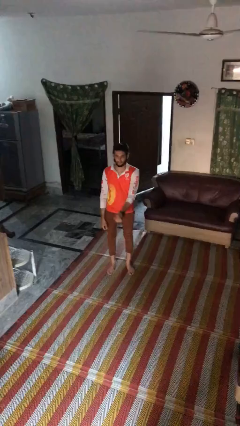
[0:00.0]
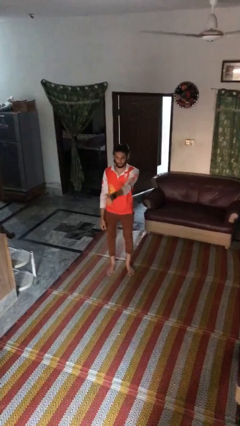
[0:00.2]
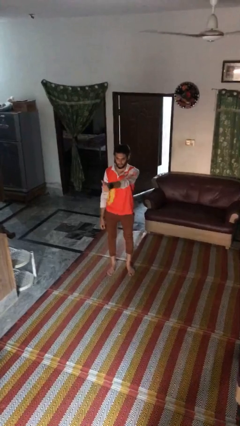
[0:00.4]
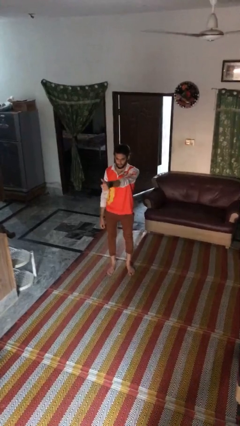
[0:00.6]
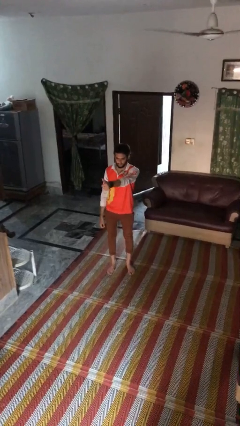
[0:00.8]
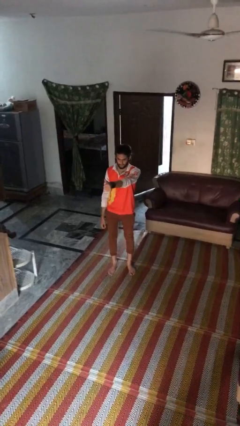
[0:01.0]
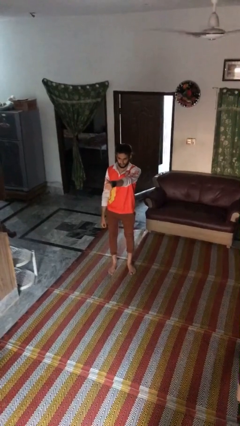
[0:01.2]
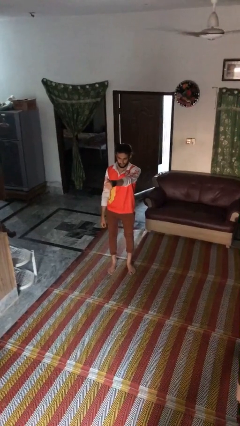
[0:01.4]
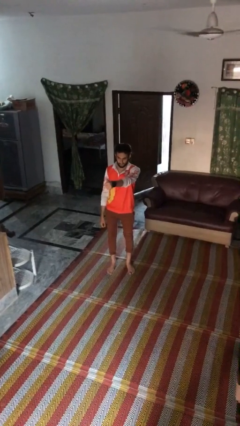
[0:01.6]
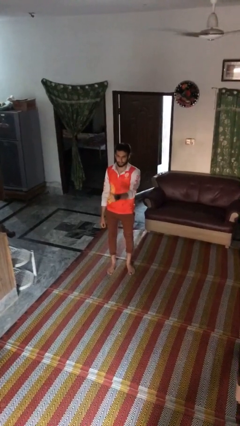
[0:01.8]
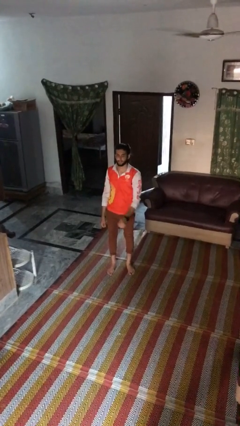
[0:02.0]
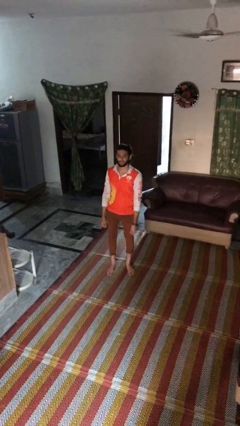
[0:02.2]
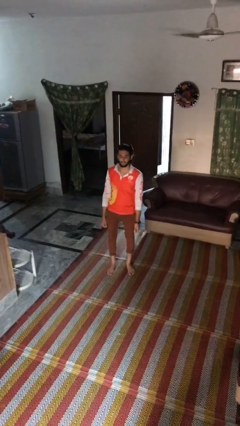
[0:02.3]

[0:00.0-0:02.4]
person gestures thumbs up

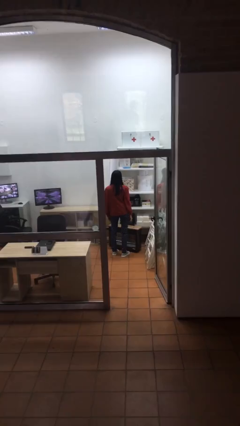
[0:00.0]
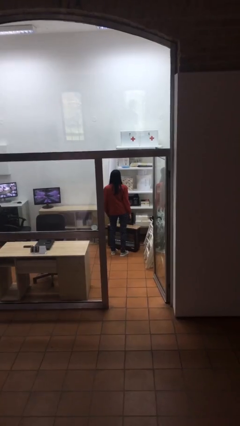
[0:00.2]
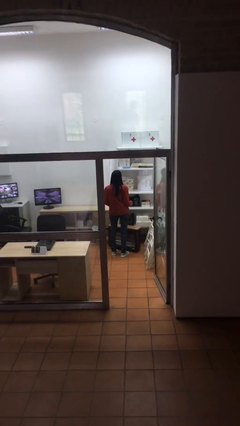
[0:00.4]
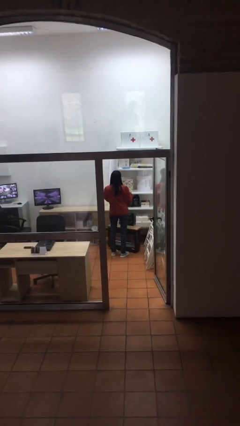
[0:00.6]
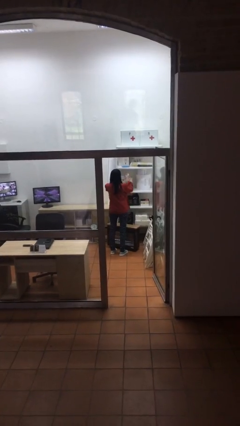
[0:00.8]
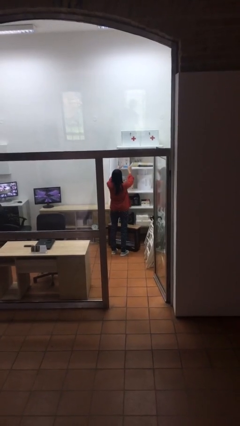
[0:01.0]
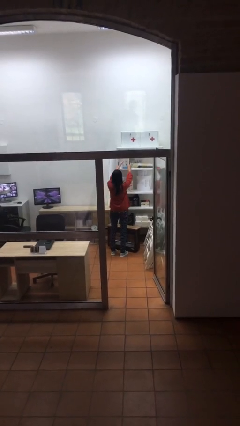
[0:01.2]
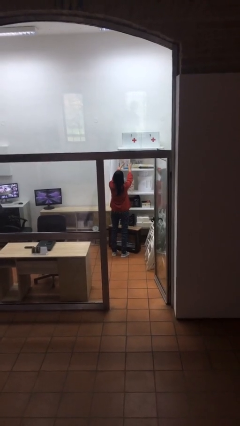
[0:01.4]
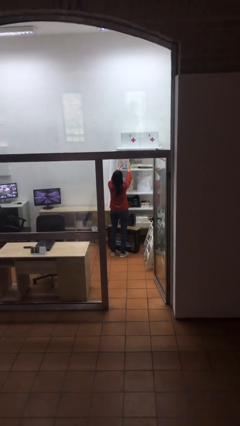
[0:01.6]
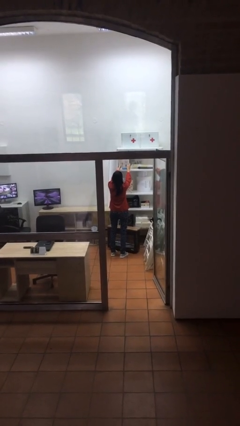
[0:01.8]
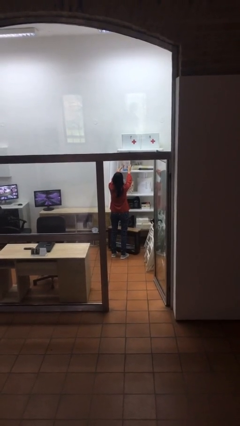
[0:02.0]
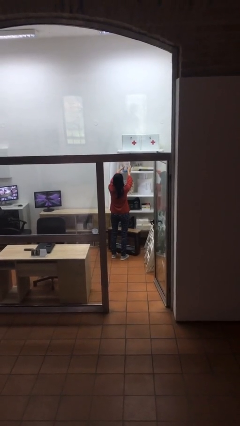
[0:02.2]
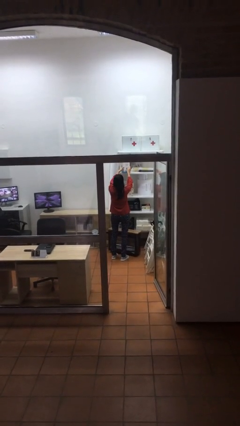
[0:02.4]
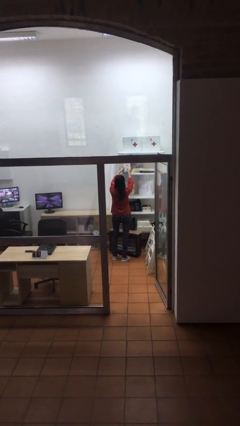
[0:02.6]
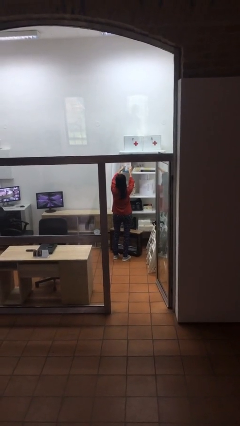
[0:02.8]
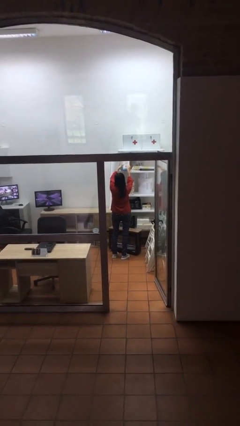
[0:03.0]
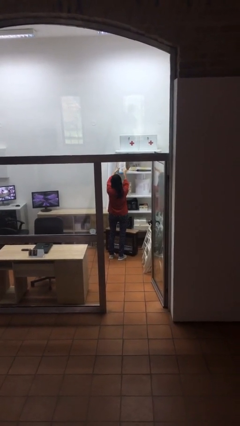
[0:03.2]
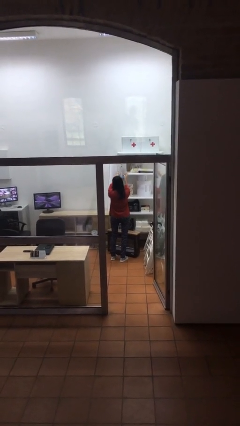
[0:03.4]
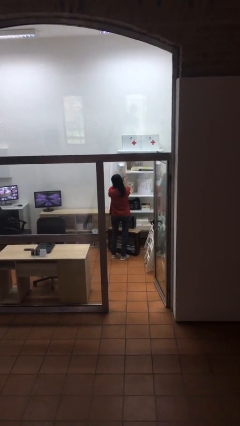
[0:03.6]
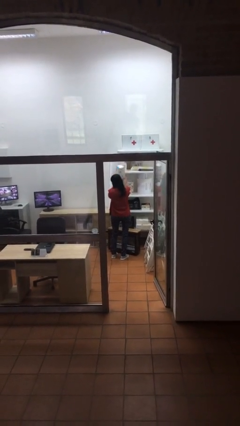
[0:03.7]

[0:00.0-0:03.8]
person picks up object from shelf

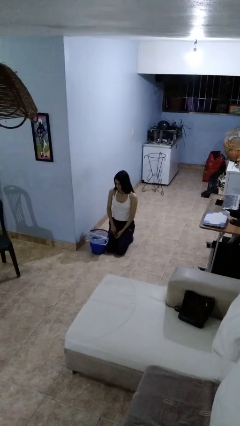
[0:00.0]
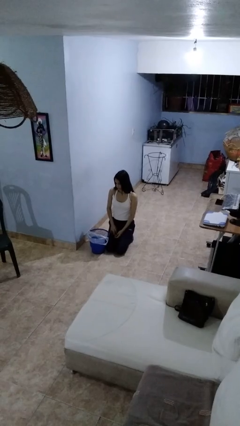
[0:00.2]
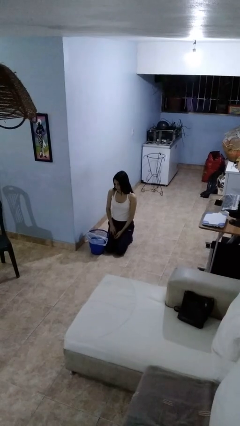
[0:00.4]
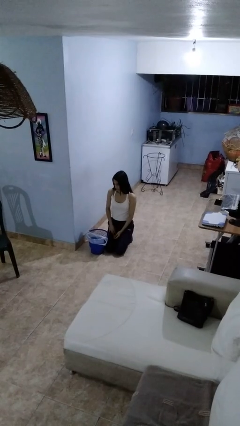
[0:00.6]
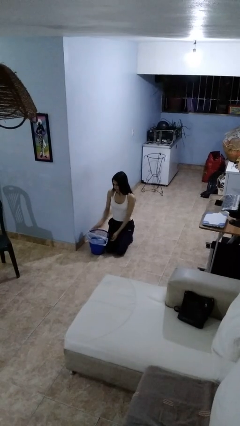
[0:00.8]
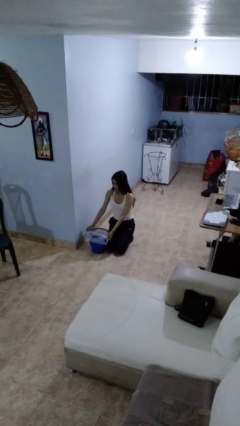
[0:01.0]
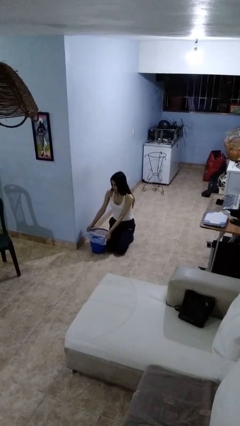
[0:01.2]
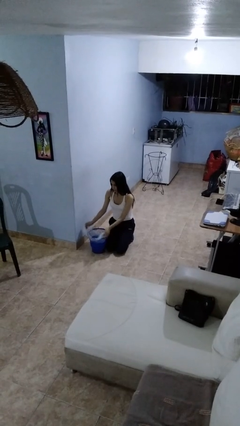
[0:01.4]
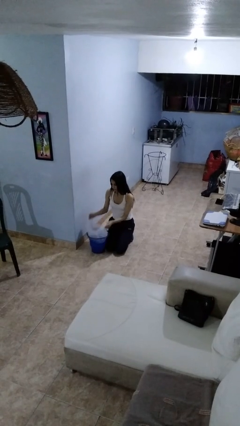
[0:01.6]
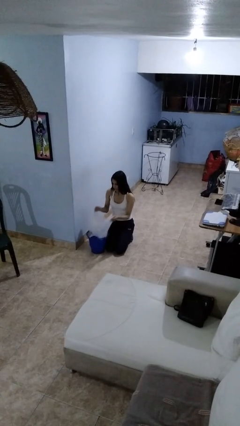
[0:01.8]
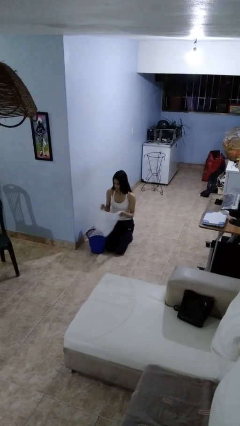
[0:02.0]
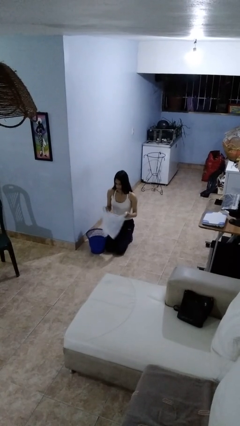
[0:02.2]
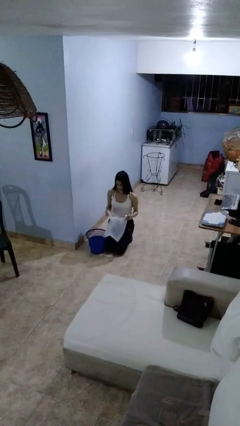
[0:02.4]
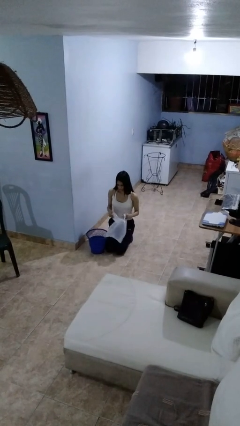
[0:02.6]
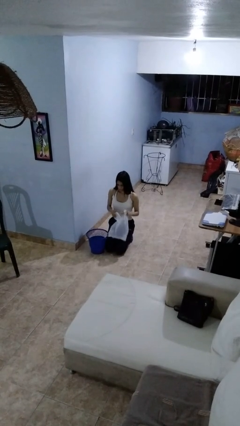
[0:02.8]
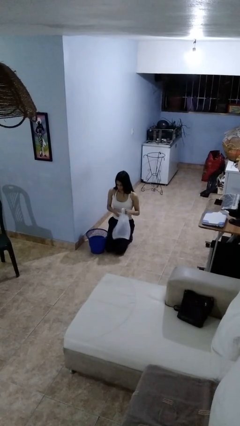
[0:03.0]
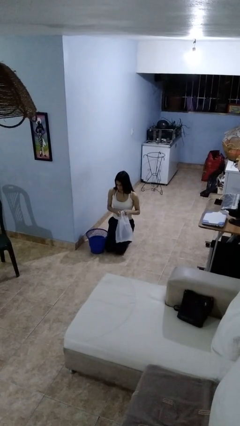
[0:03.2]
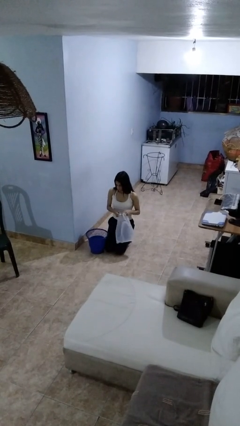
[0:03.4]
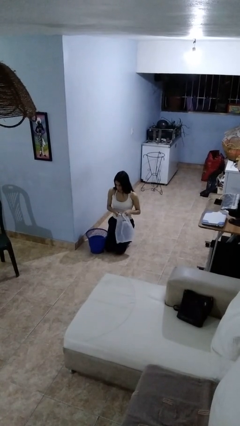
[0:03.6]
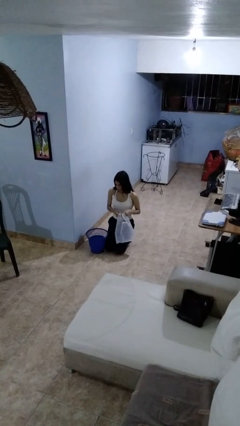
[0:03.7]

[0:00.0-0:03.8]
person removes trashbag from trashcan

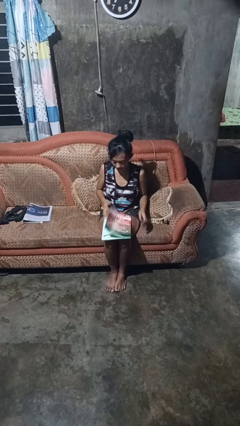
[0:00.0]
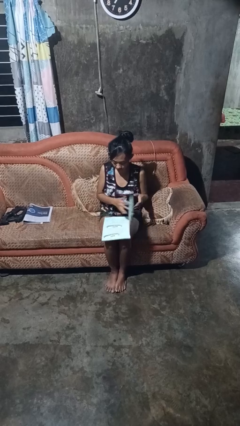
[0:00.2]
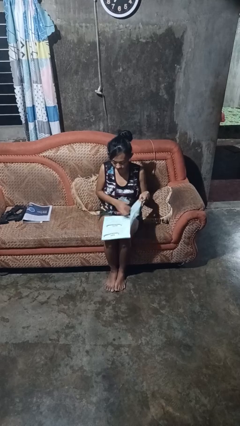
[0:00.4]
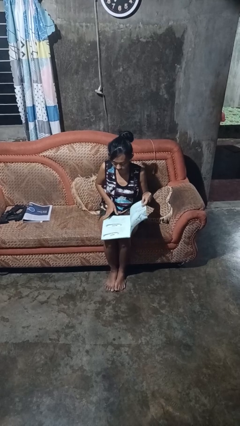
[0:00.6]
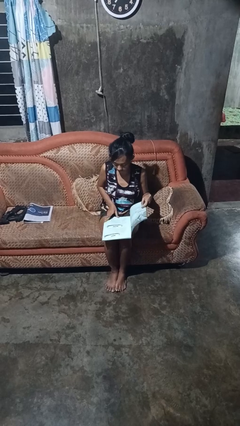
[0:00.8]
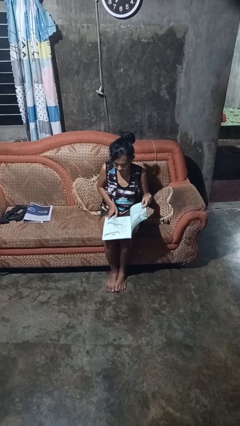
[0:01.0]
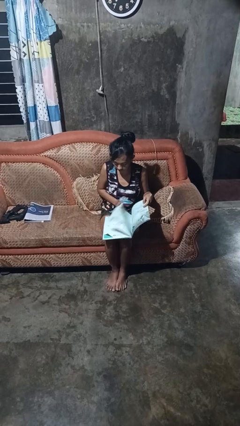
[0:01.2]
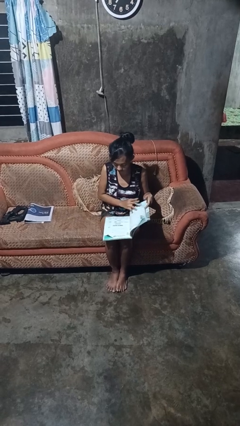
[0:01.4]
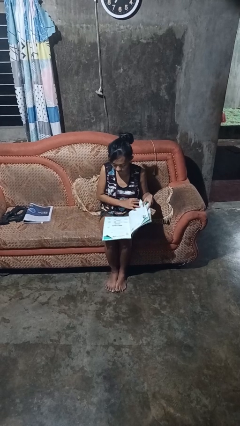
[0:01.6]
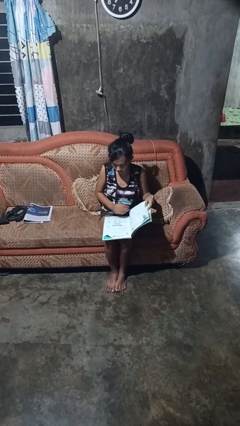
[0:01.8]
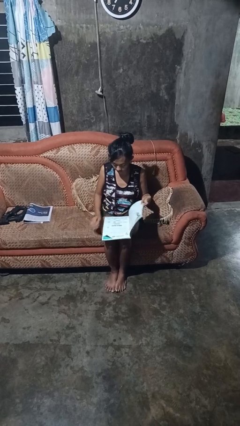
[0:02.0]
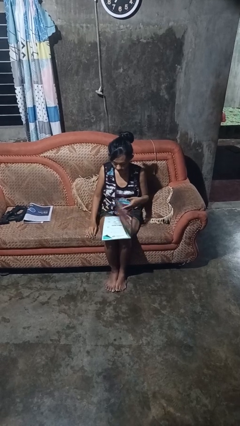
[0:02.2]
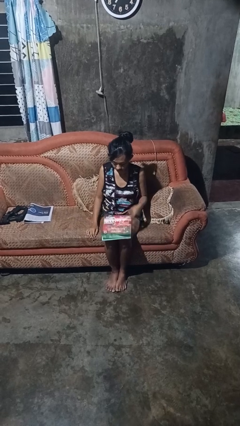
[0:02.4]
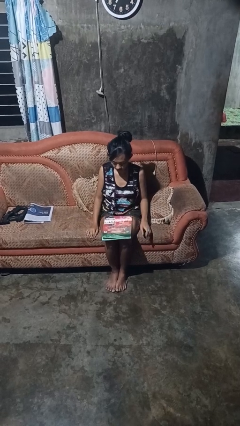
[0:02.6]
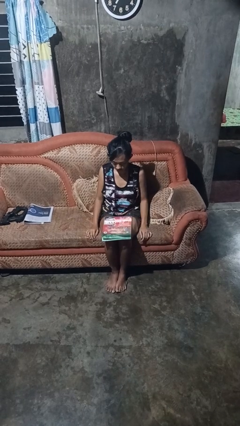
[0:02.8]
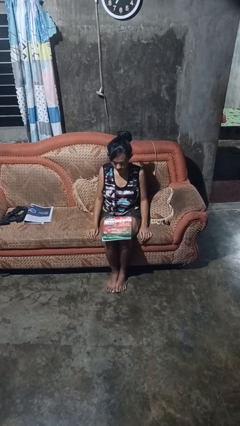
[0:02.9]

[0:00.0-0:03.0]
person reads magazine

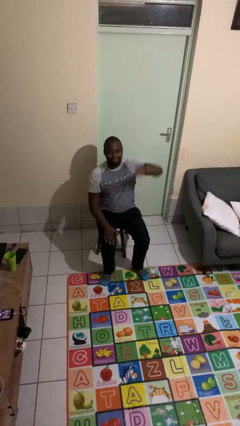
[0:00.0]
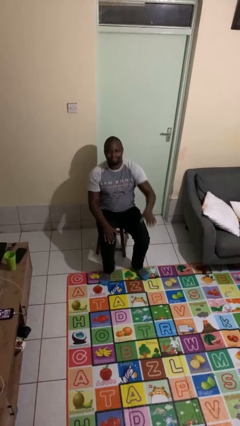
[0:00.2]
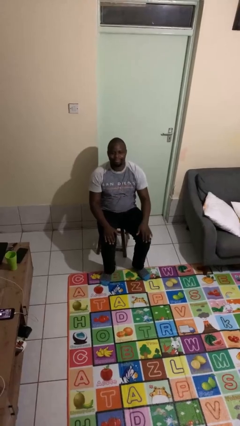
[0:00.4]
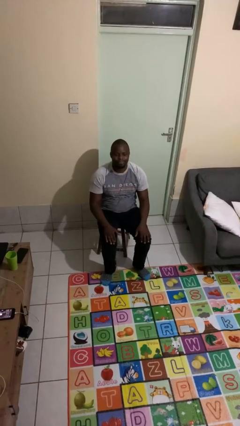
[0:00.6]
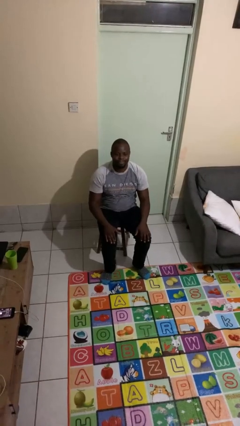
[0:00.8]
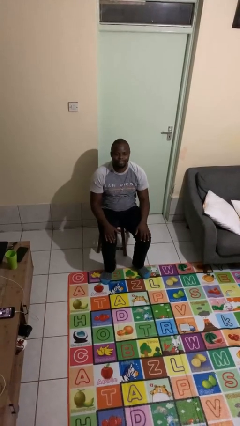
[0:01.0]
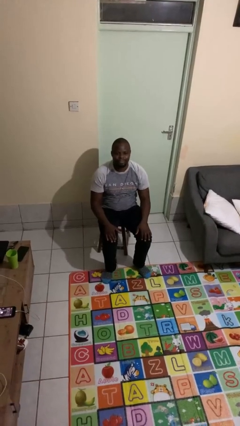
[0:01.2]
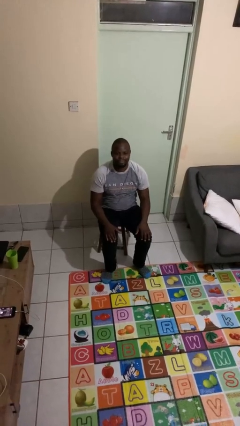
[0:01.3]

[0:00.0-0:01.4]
person gestures lower hand

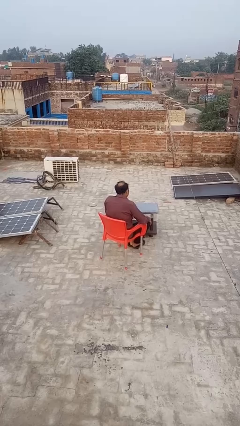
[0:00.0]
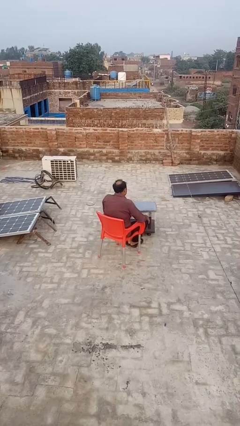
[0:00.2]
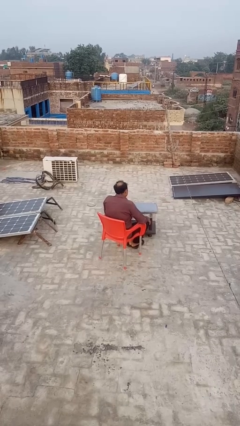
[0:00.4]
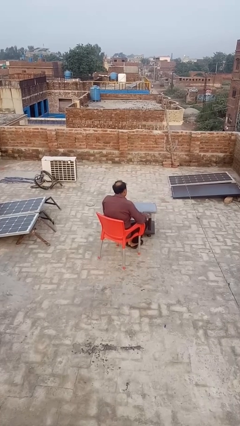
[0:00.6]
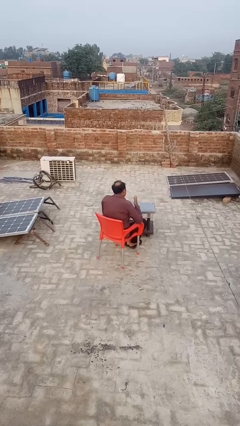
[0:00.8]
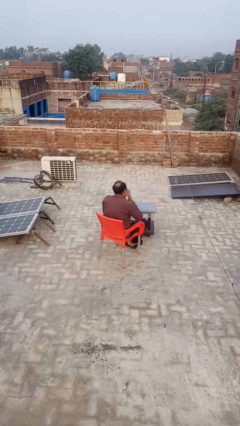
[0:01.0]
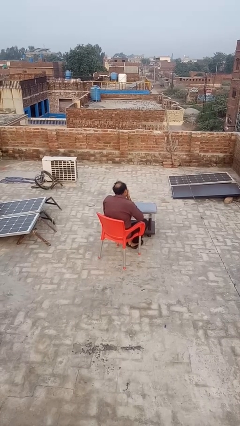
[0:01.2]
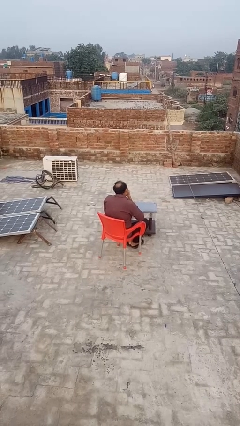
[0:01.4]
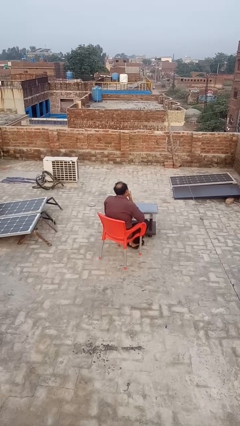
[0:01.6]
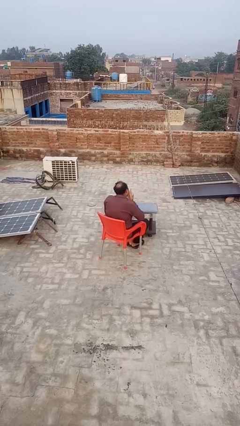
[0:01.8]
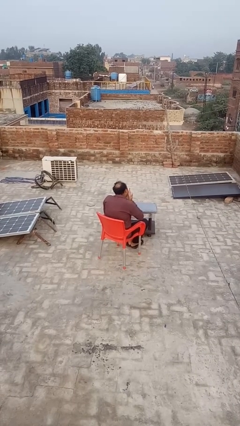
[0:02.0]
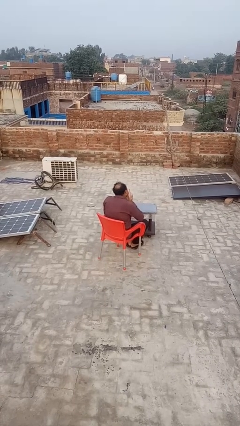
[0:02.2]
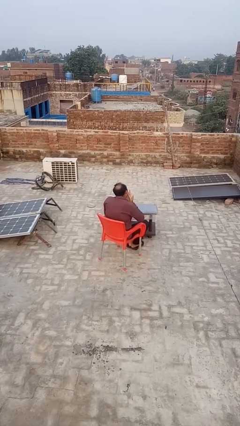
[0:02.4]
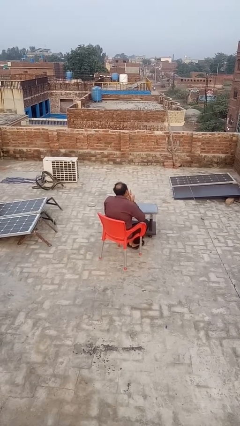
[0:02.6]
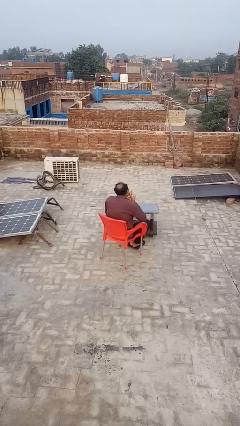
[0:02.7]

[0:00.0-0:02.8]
person licks fingers

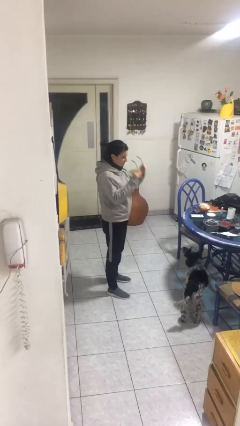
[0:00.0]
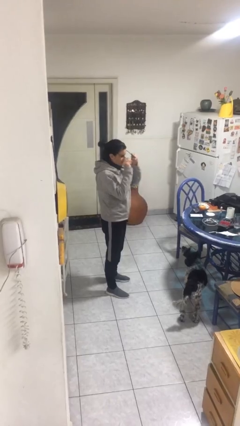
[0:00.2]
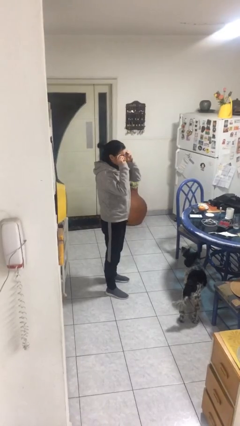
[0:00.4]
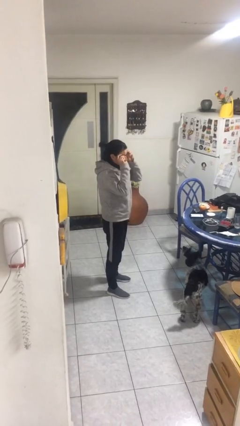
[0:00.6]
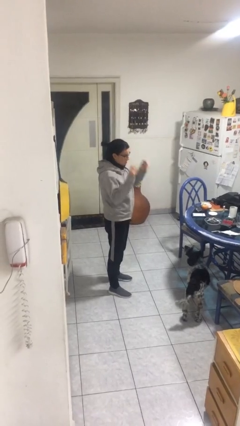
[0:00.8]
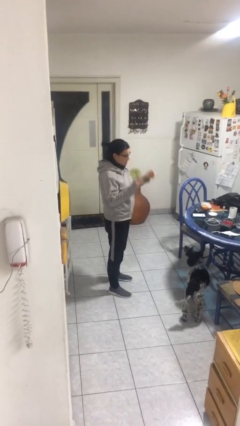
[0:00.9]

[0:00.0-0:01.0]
person puts on glasses
